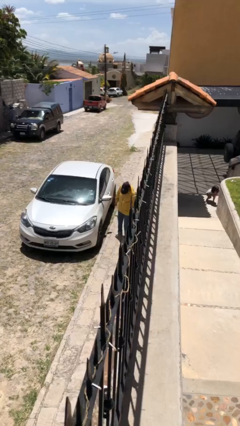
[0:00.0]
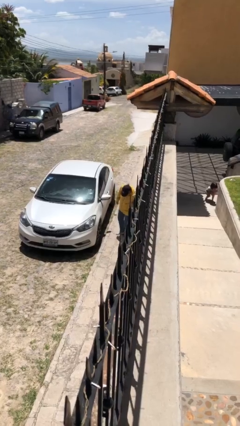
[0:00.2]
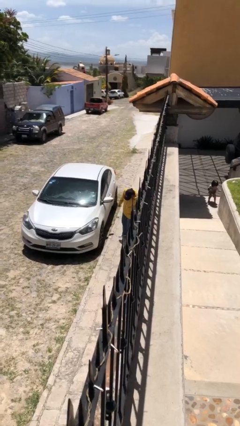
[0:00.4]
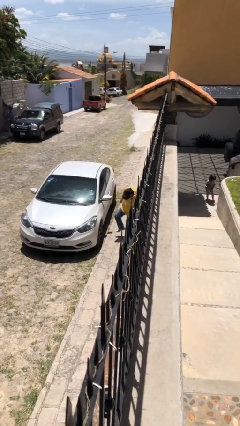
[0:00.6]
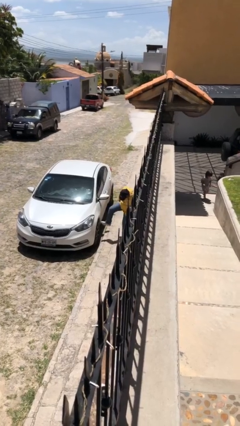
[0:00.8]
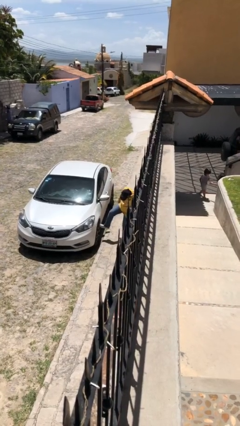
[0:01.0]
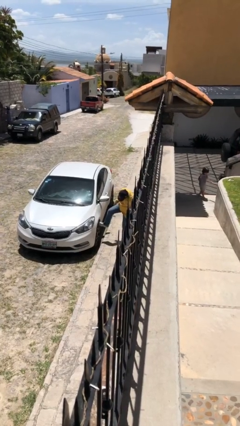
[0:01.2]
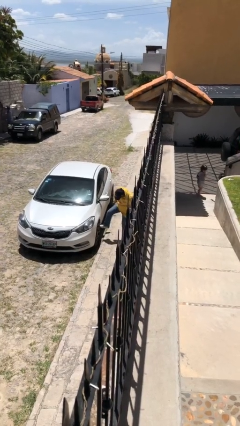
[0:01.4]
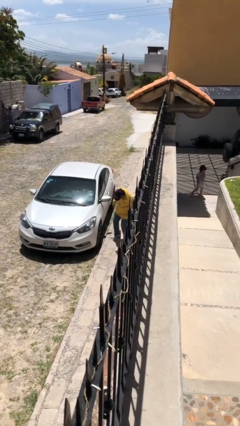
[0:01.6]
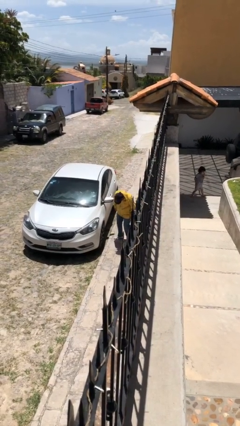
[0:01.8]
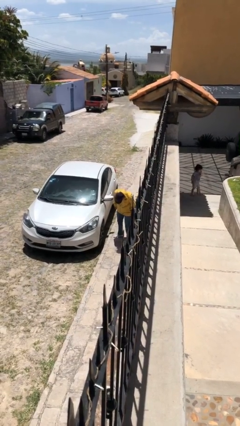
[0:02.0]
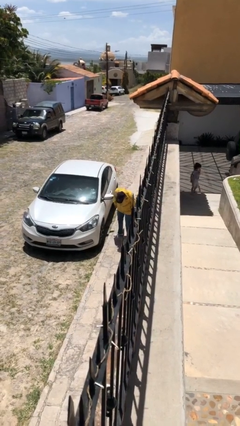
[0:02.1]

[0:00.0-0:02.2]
person kicks car tires

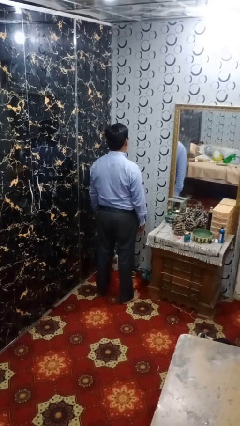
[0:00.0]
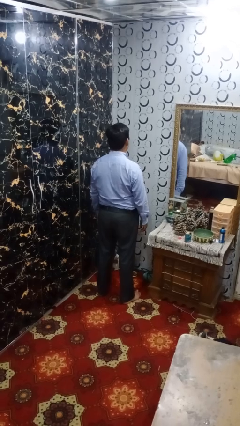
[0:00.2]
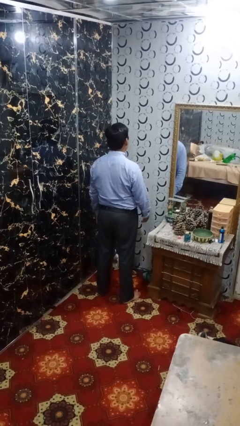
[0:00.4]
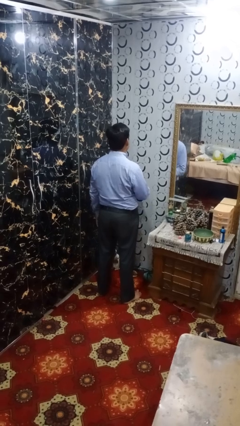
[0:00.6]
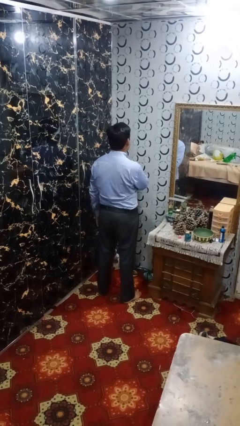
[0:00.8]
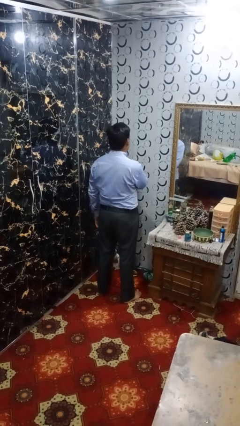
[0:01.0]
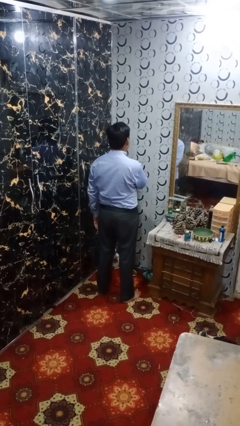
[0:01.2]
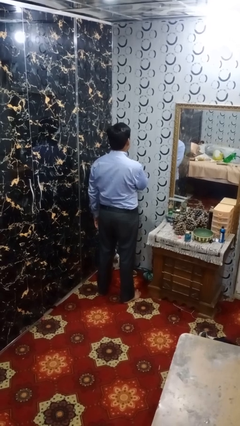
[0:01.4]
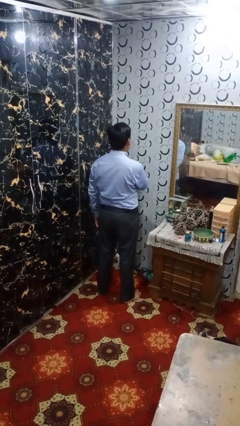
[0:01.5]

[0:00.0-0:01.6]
person drums on chest

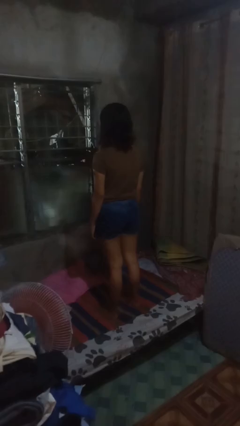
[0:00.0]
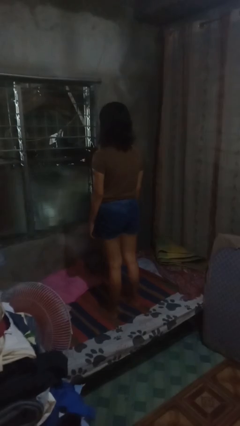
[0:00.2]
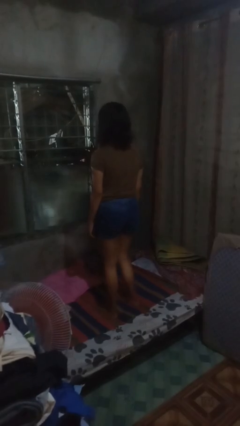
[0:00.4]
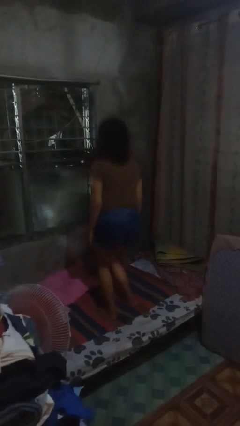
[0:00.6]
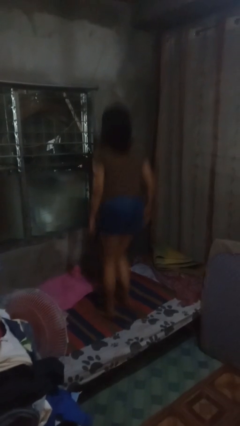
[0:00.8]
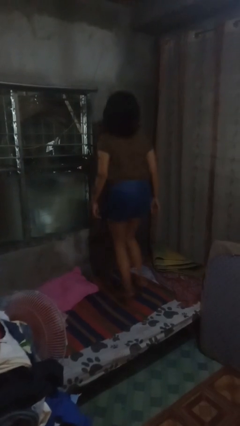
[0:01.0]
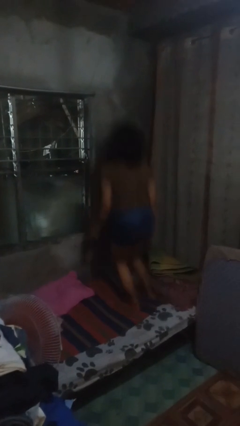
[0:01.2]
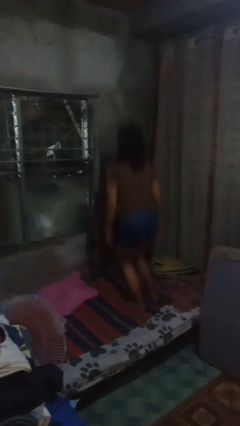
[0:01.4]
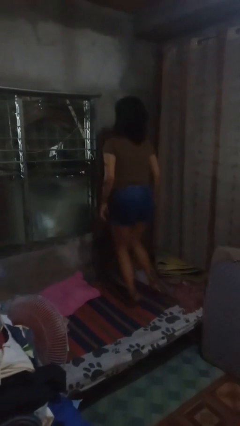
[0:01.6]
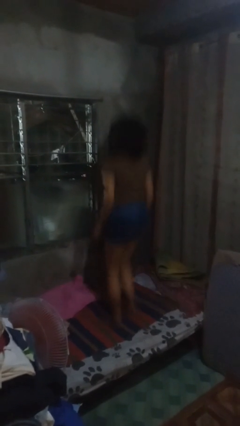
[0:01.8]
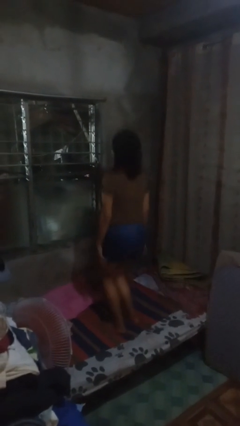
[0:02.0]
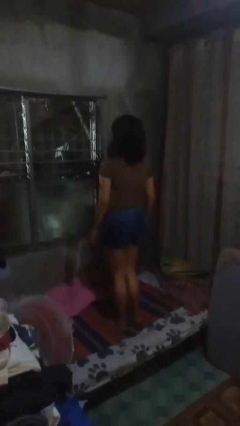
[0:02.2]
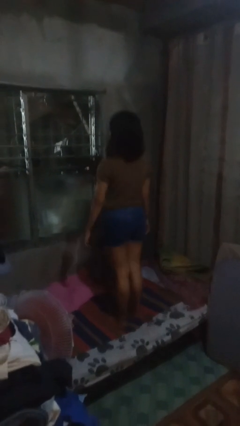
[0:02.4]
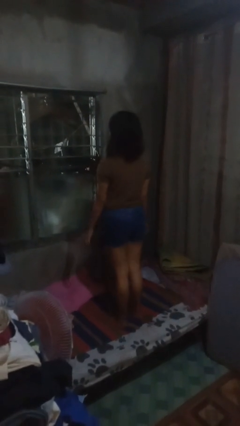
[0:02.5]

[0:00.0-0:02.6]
person jumps on bed

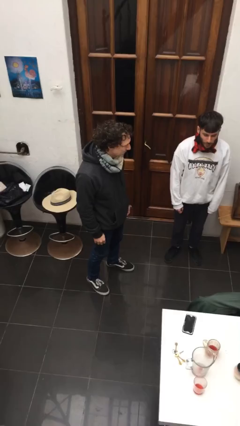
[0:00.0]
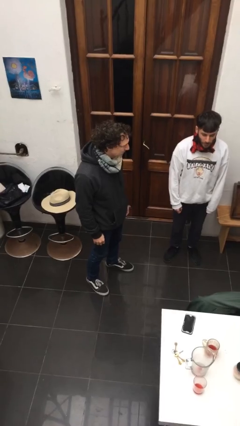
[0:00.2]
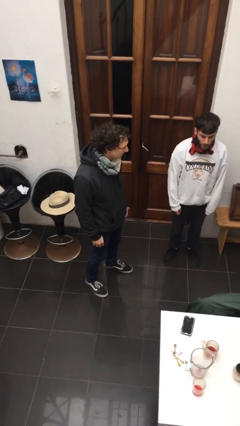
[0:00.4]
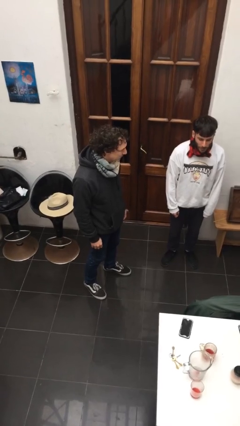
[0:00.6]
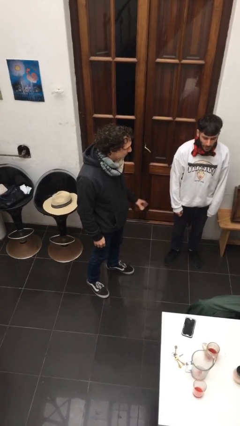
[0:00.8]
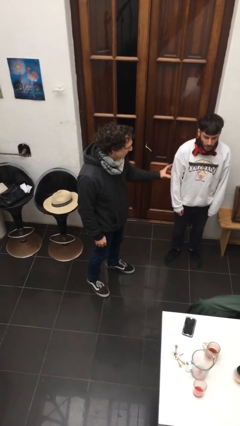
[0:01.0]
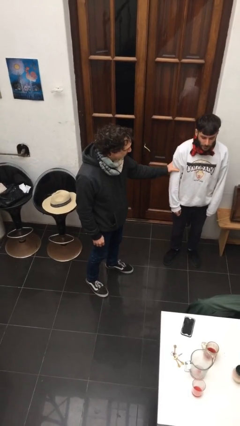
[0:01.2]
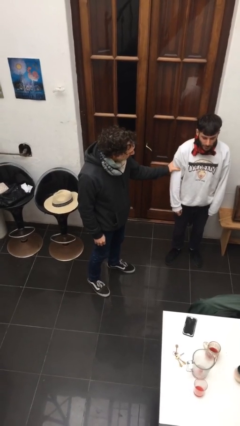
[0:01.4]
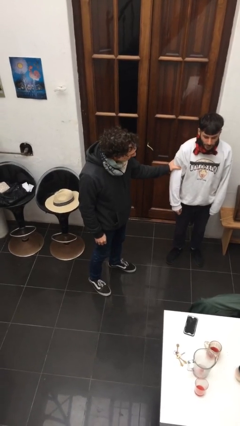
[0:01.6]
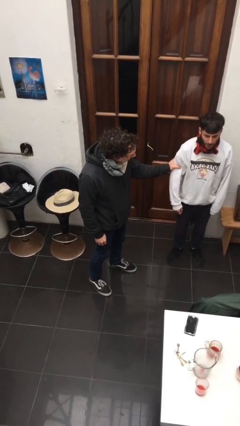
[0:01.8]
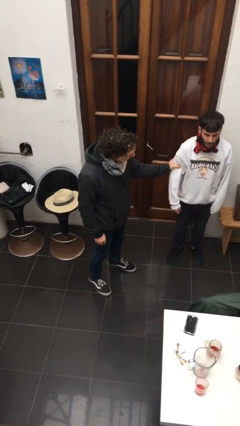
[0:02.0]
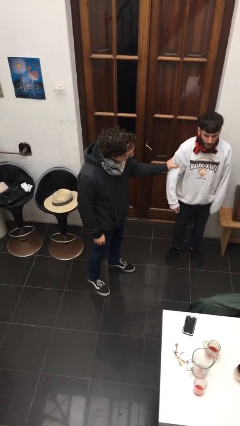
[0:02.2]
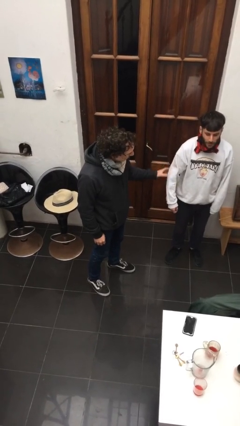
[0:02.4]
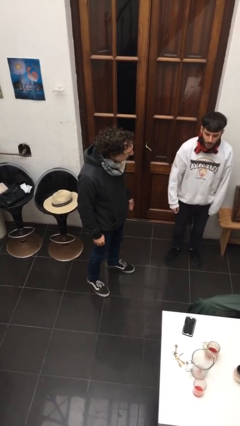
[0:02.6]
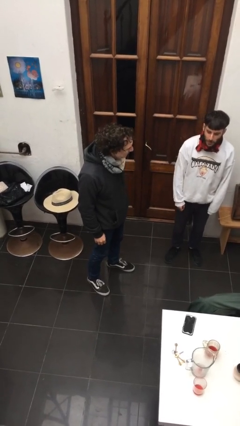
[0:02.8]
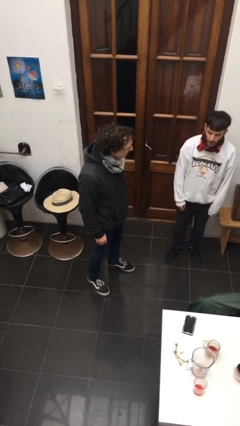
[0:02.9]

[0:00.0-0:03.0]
person grabs person by bicep

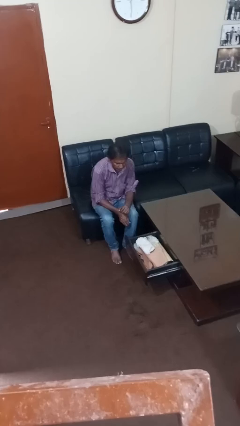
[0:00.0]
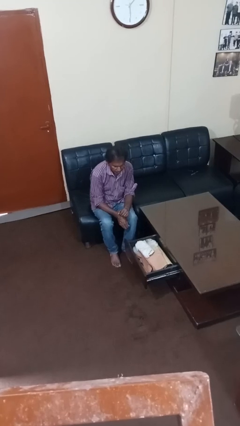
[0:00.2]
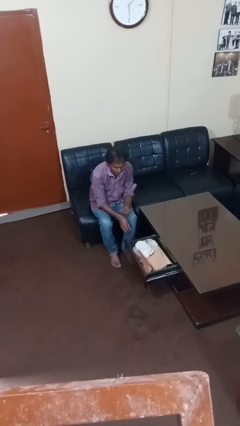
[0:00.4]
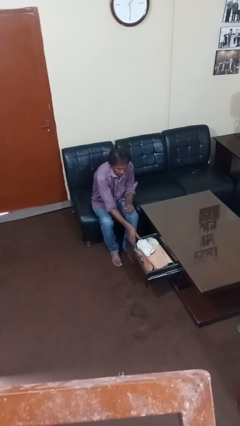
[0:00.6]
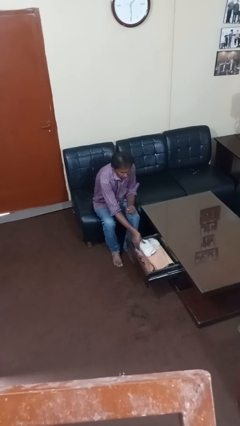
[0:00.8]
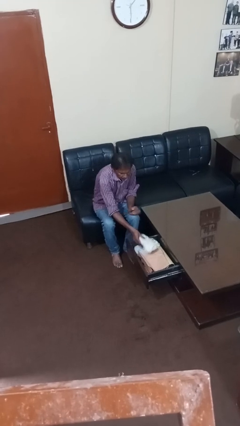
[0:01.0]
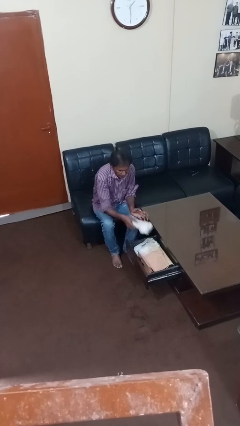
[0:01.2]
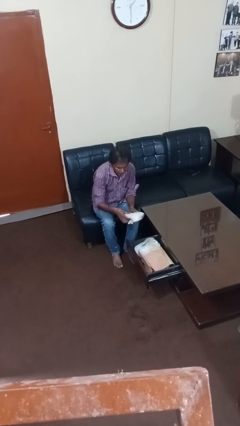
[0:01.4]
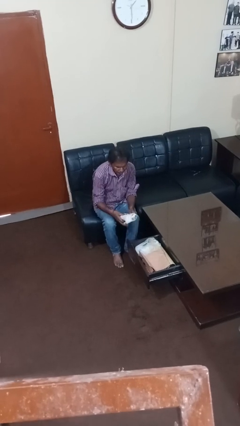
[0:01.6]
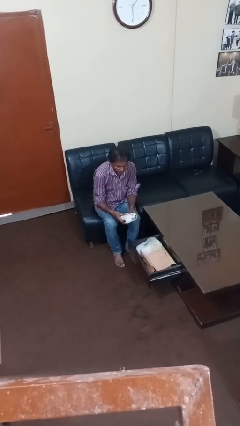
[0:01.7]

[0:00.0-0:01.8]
person takes clothes from dresser

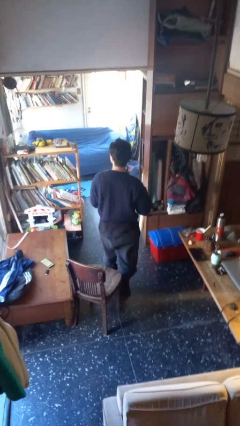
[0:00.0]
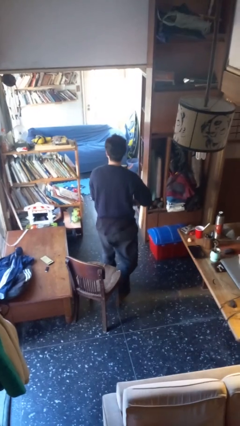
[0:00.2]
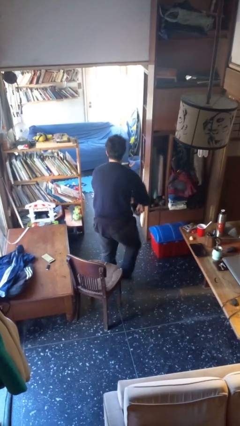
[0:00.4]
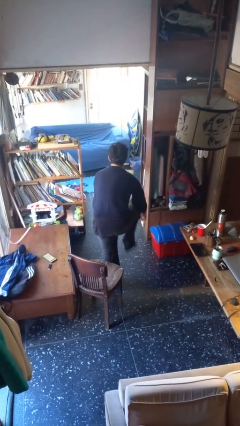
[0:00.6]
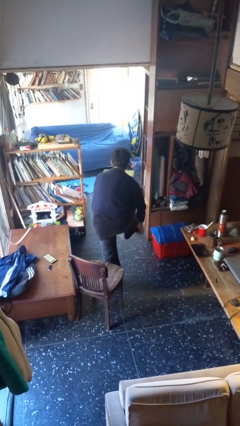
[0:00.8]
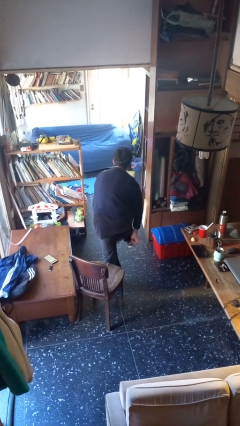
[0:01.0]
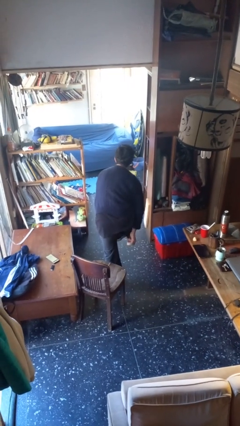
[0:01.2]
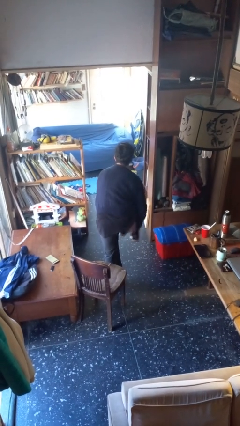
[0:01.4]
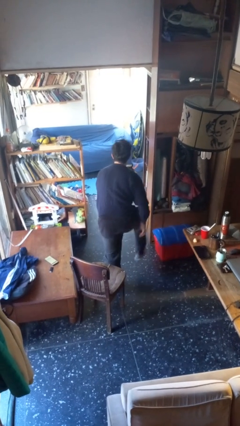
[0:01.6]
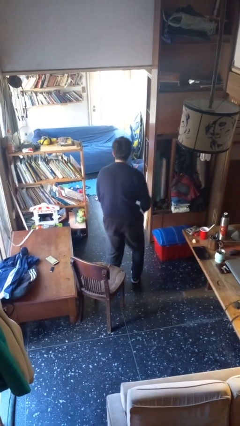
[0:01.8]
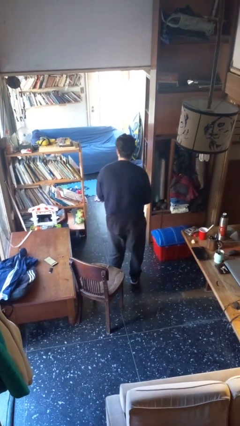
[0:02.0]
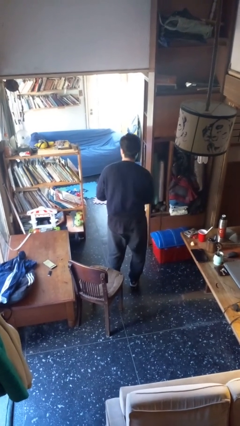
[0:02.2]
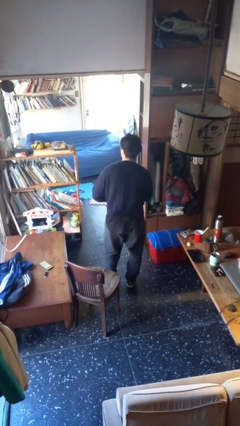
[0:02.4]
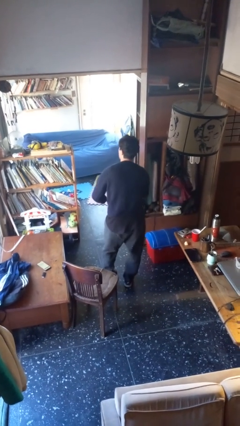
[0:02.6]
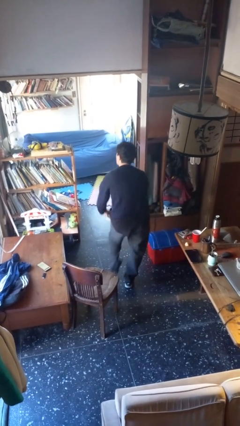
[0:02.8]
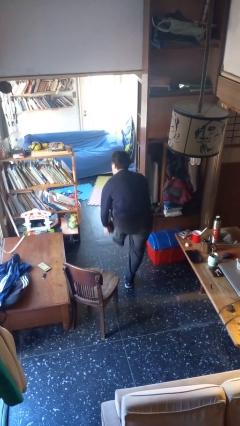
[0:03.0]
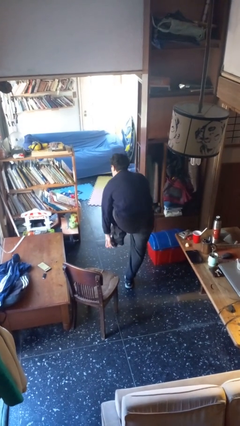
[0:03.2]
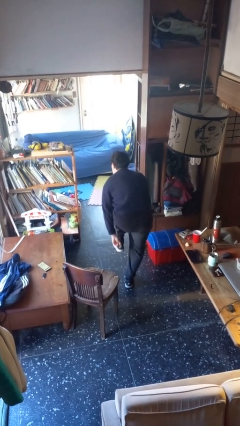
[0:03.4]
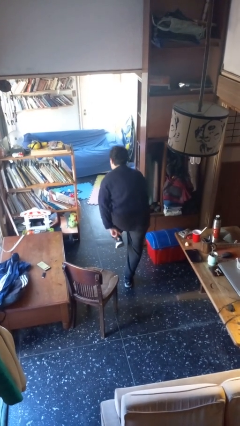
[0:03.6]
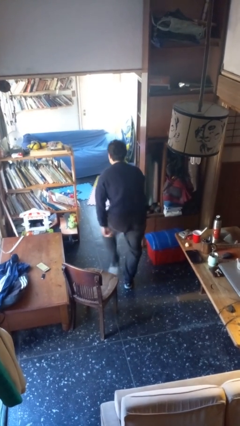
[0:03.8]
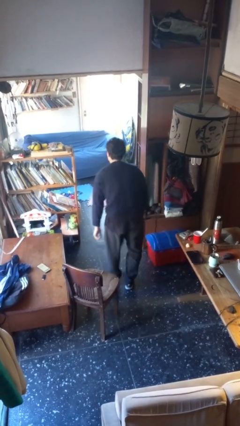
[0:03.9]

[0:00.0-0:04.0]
person puts on shoes

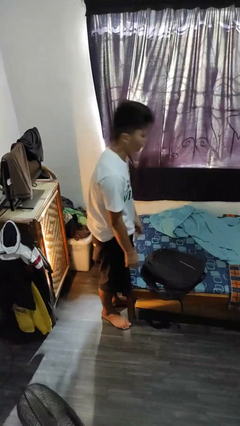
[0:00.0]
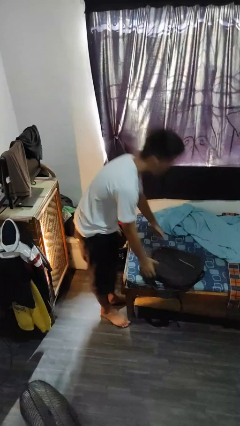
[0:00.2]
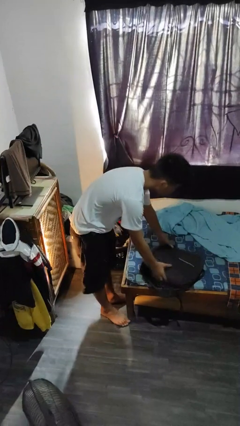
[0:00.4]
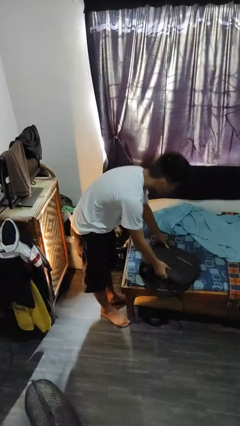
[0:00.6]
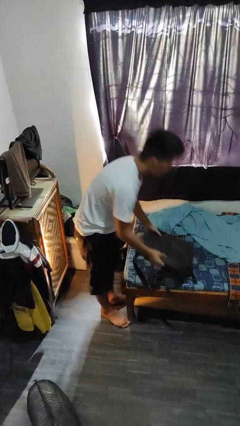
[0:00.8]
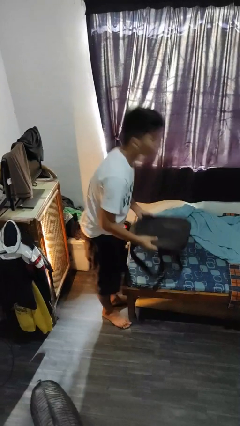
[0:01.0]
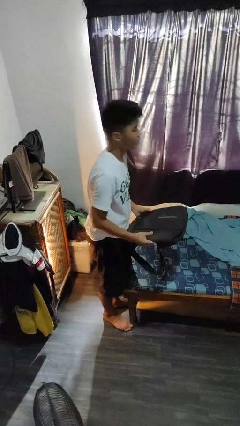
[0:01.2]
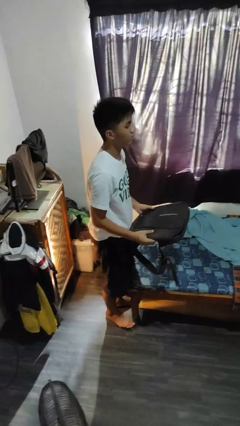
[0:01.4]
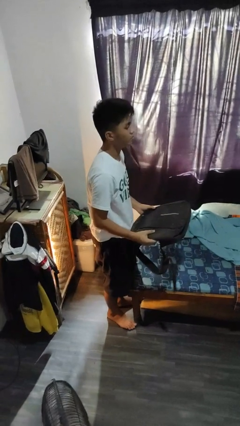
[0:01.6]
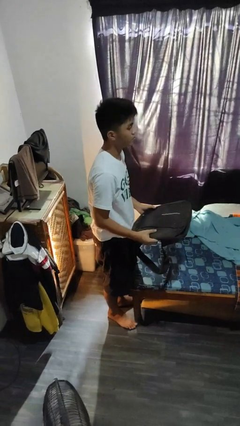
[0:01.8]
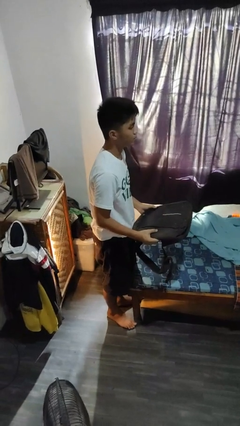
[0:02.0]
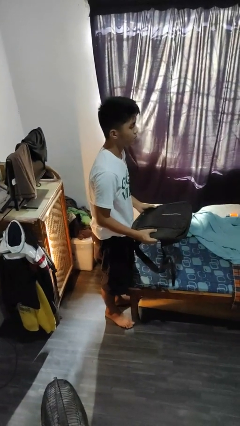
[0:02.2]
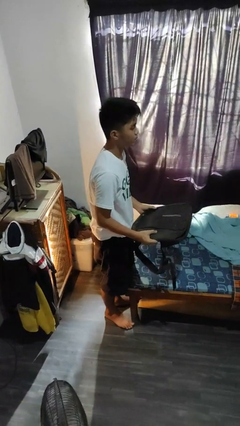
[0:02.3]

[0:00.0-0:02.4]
person picks up object from bed
